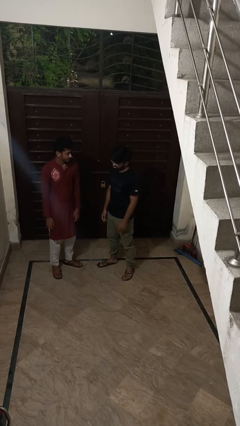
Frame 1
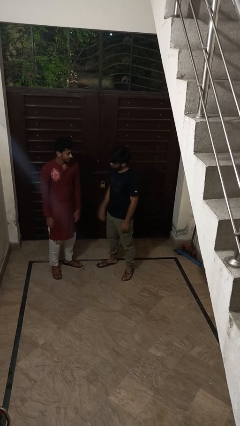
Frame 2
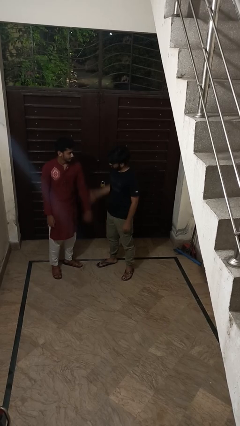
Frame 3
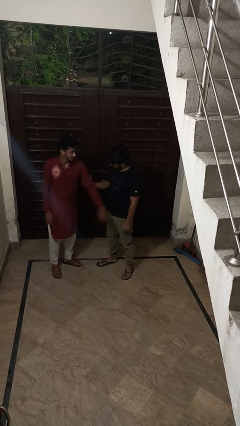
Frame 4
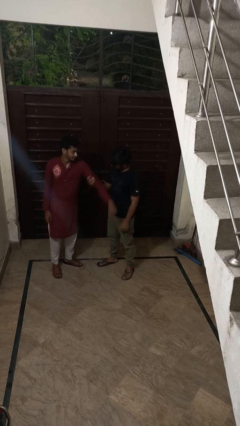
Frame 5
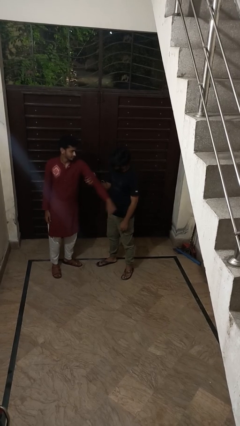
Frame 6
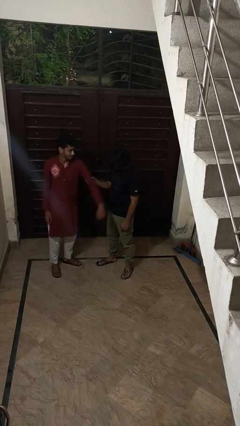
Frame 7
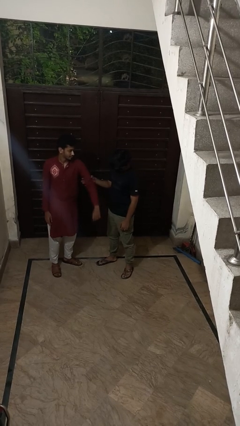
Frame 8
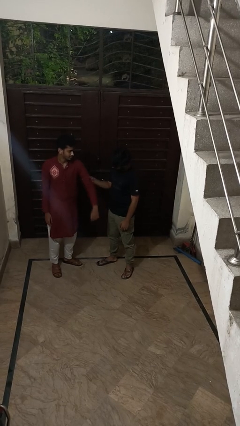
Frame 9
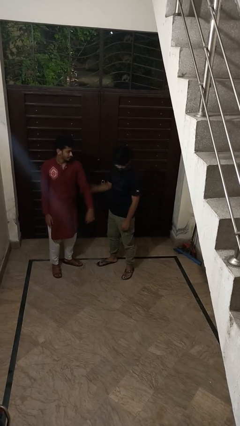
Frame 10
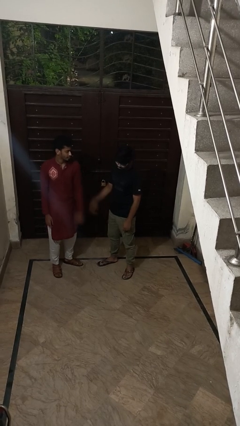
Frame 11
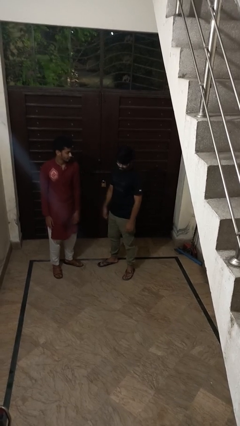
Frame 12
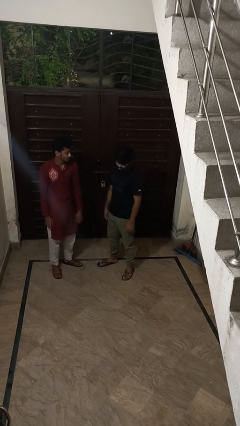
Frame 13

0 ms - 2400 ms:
person grabs person by bicep

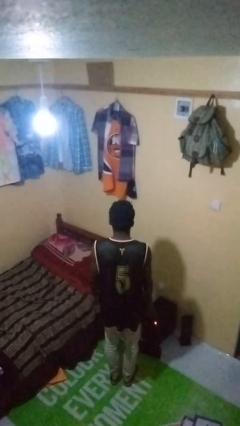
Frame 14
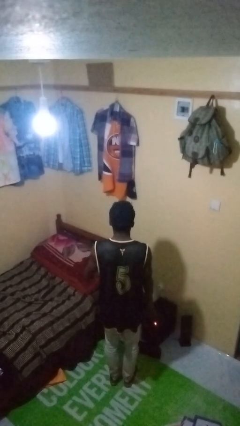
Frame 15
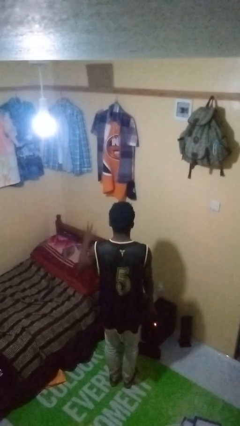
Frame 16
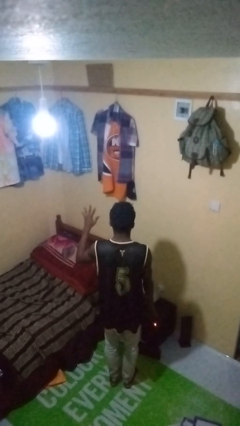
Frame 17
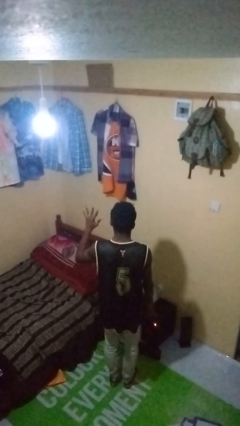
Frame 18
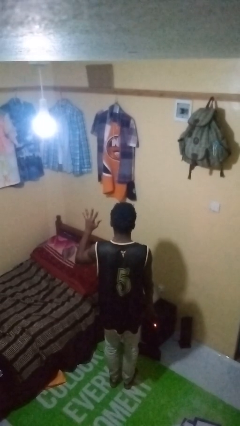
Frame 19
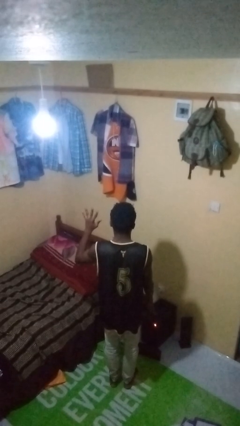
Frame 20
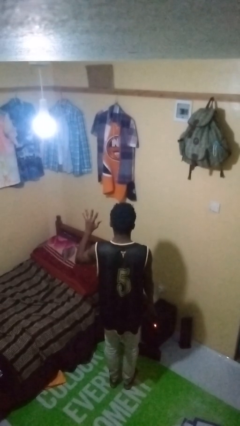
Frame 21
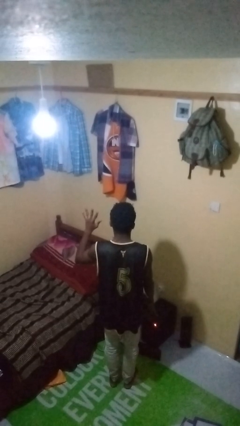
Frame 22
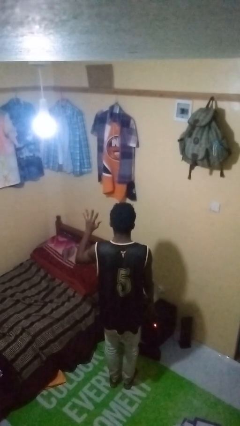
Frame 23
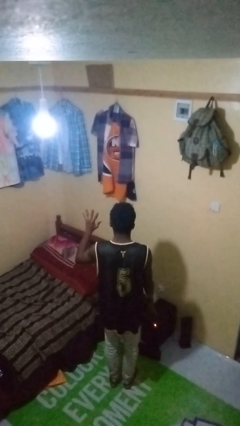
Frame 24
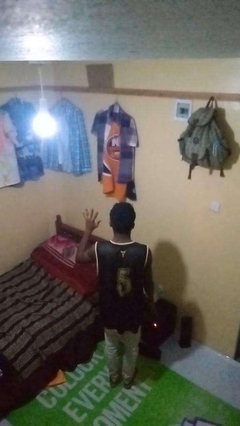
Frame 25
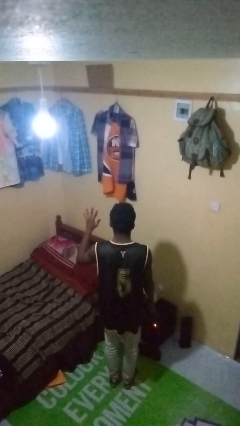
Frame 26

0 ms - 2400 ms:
person gestures number five

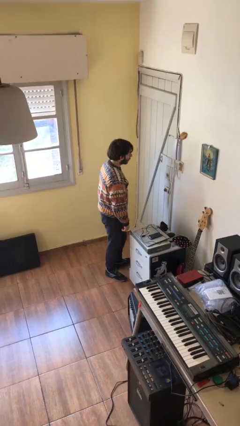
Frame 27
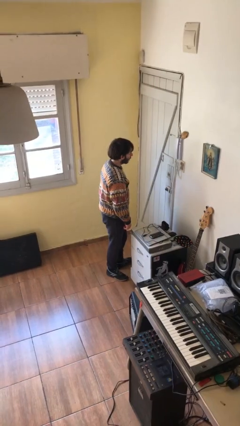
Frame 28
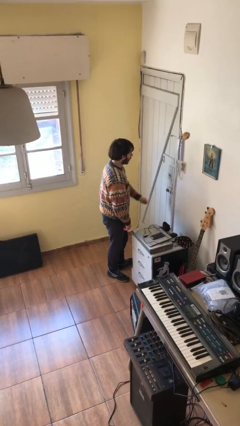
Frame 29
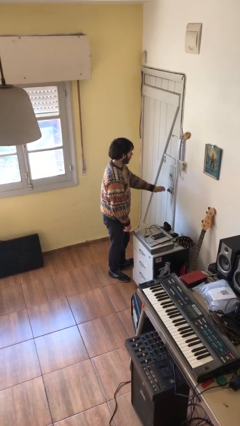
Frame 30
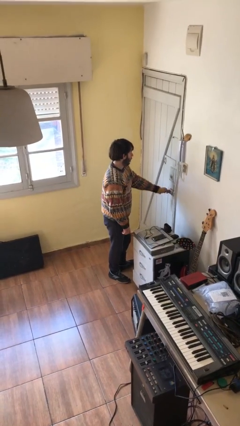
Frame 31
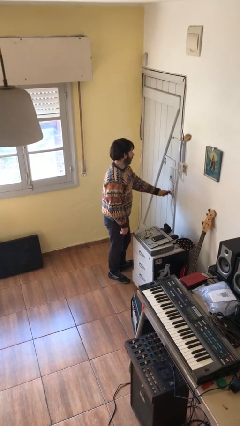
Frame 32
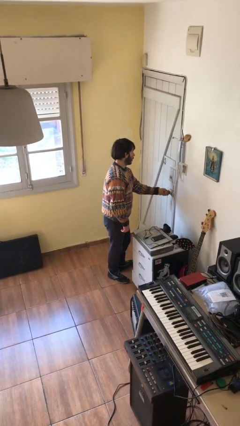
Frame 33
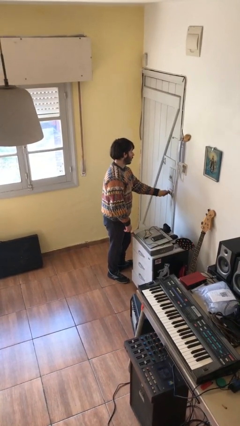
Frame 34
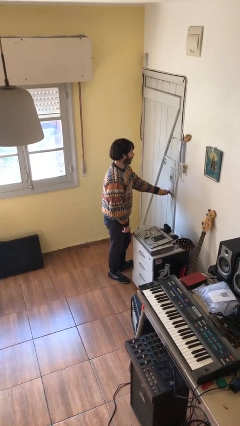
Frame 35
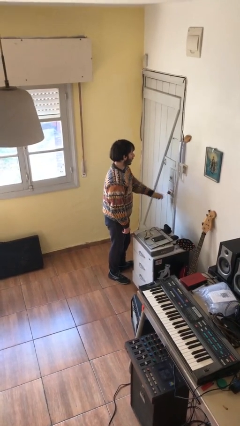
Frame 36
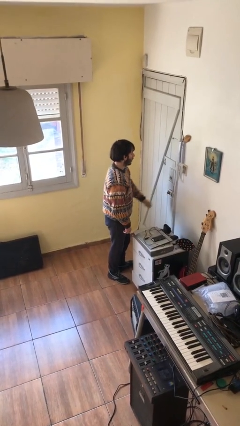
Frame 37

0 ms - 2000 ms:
person unlocks door with keys

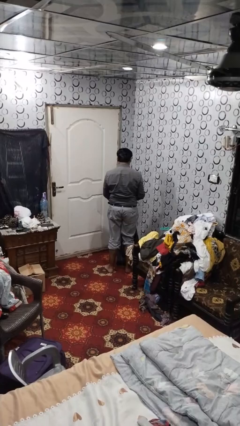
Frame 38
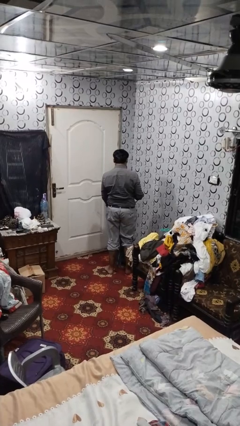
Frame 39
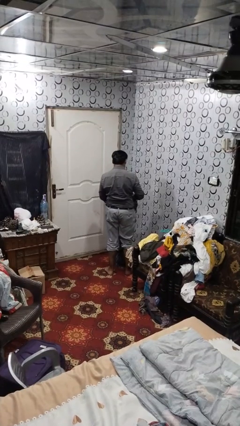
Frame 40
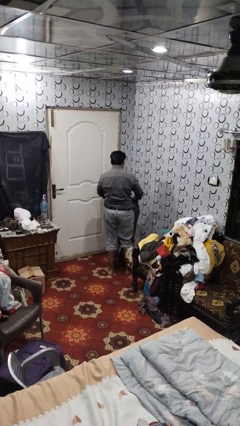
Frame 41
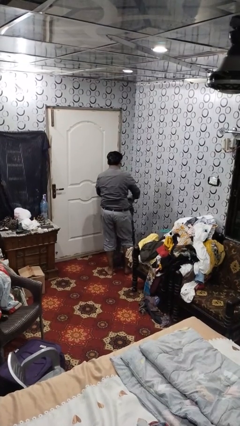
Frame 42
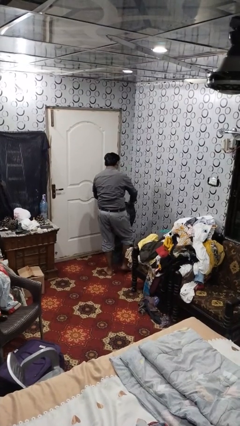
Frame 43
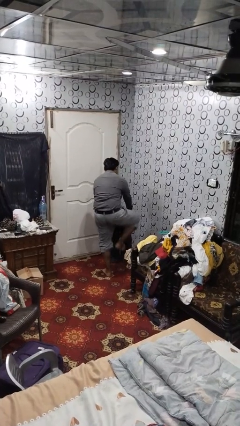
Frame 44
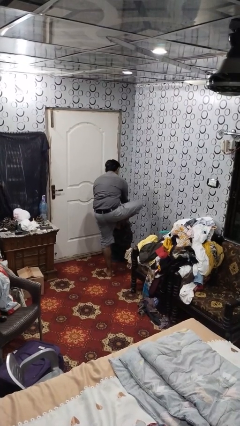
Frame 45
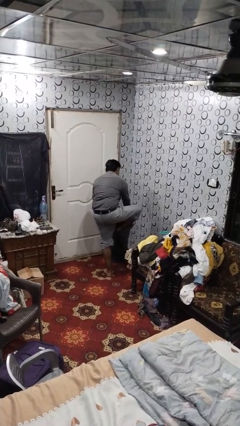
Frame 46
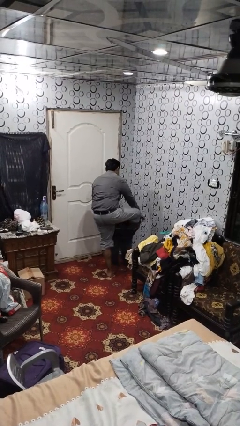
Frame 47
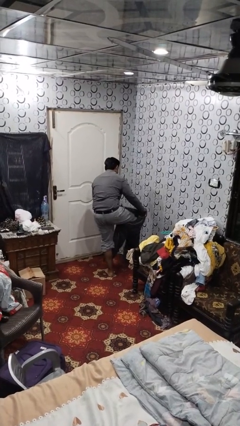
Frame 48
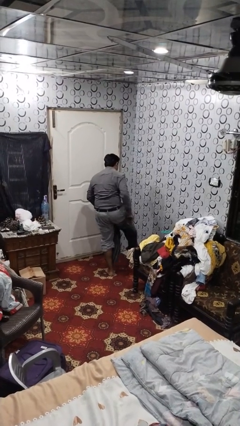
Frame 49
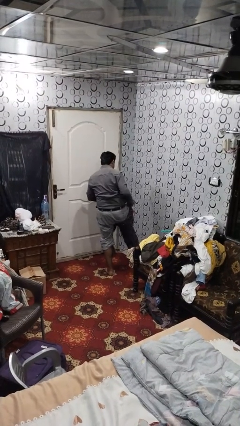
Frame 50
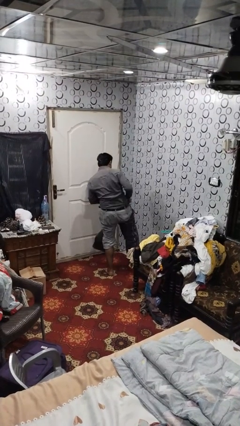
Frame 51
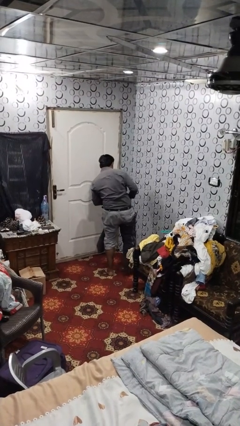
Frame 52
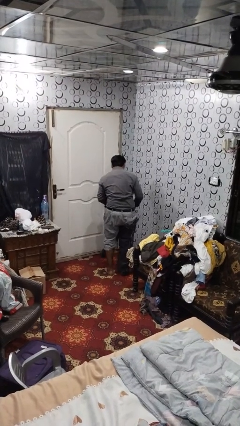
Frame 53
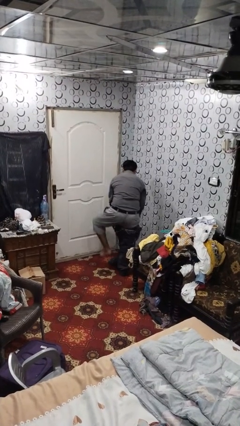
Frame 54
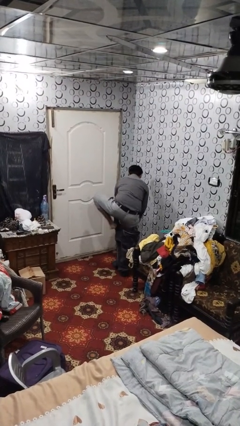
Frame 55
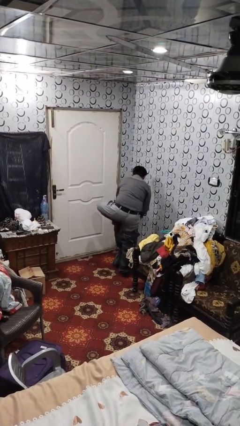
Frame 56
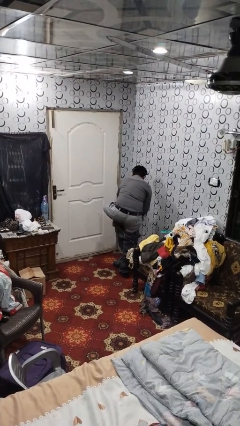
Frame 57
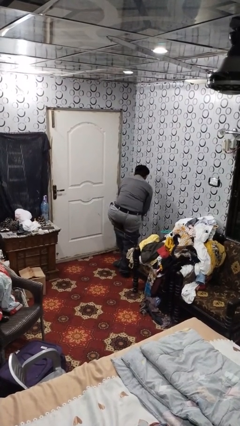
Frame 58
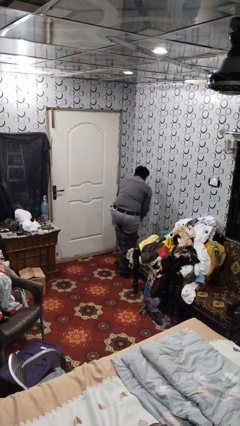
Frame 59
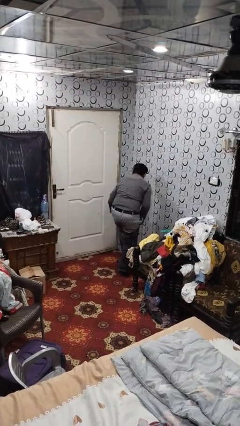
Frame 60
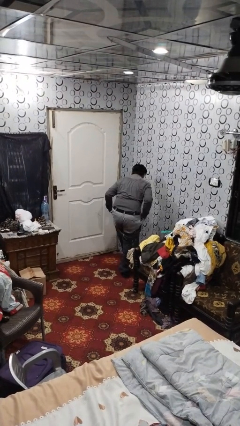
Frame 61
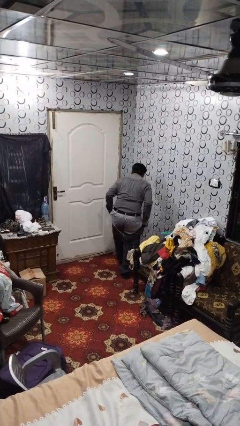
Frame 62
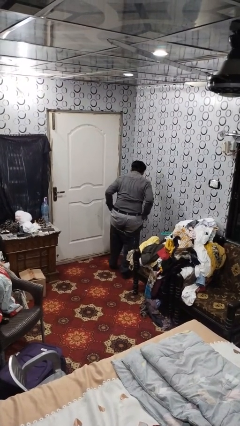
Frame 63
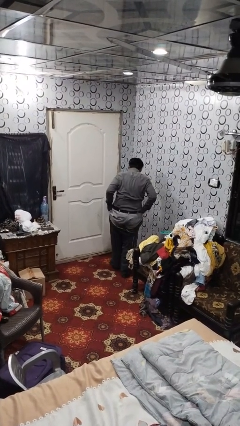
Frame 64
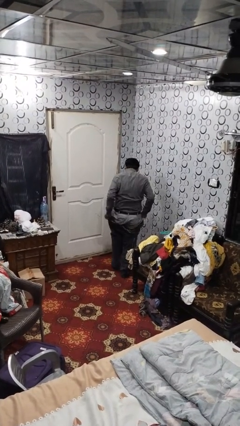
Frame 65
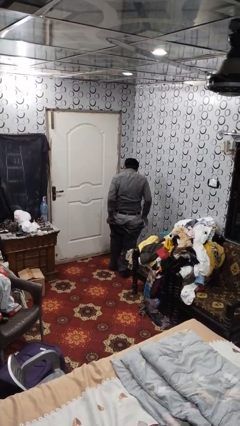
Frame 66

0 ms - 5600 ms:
person puts on pants

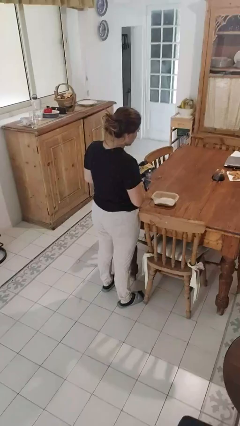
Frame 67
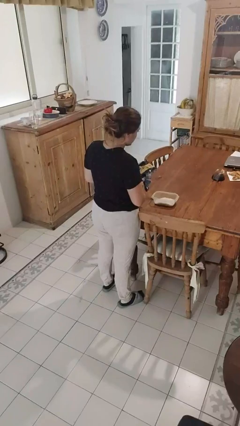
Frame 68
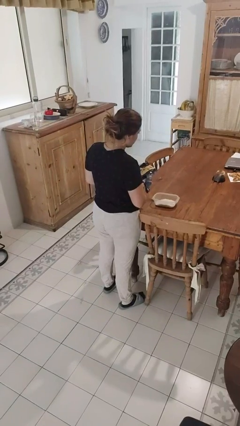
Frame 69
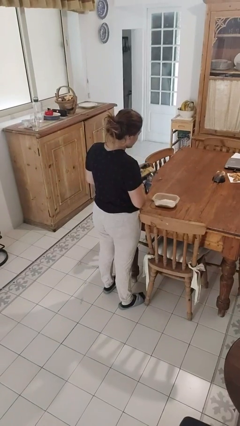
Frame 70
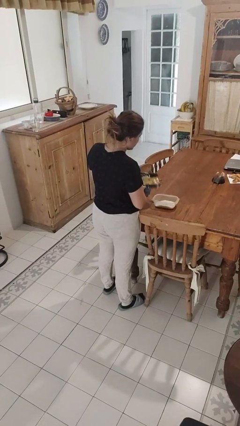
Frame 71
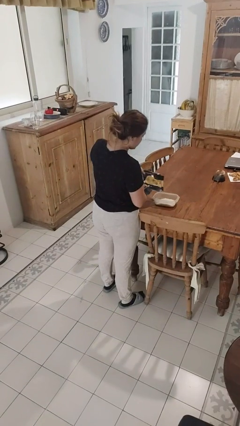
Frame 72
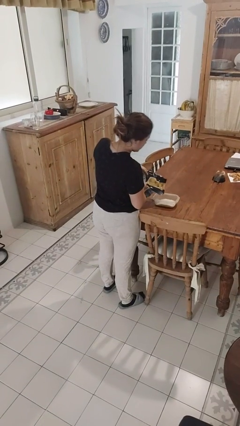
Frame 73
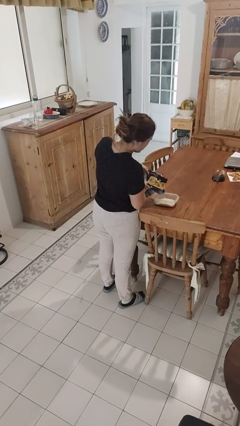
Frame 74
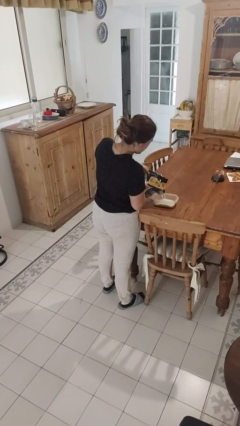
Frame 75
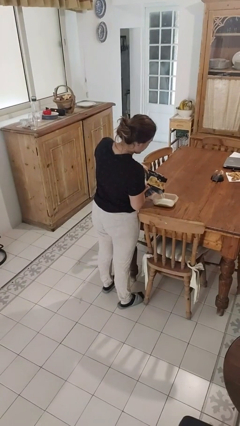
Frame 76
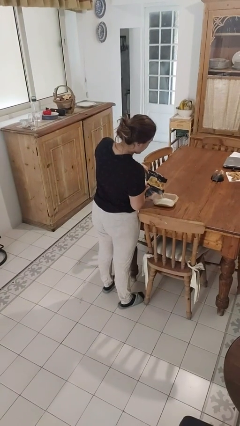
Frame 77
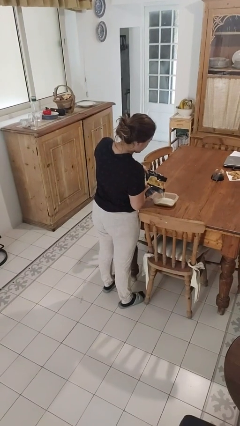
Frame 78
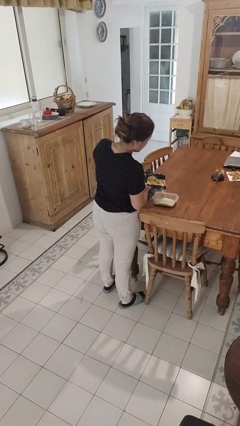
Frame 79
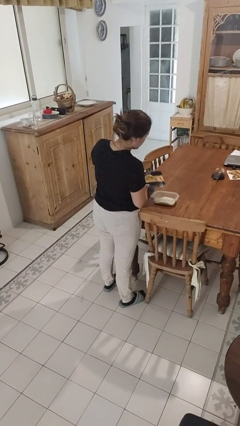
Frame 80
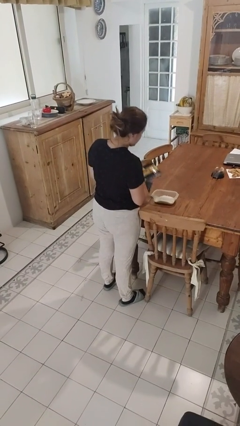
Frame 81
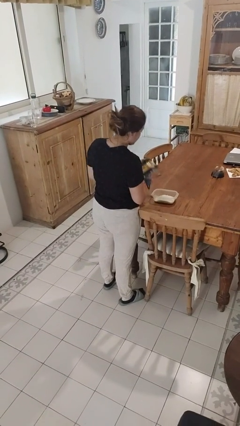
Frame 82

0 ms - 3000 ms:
person pours into bowl

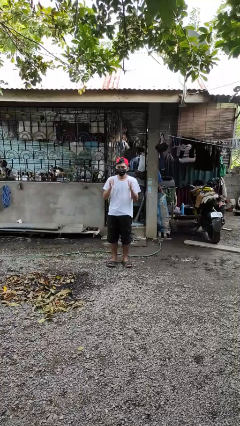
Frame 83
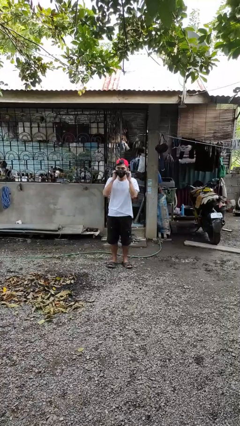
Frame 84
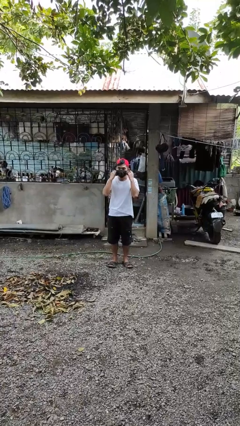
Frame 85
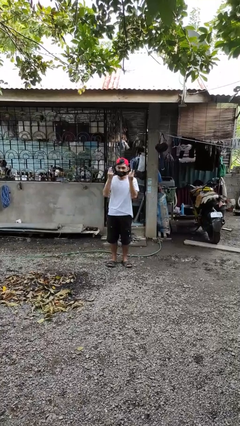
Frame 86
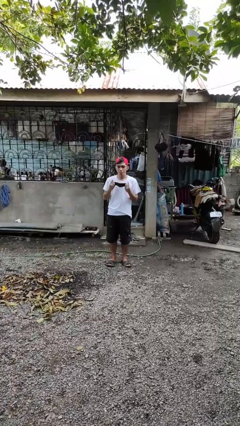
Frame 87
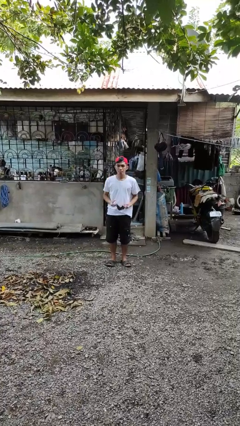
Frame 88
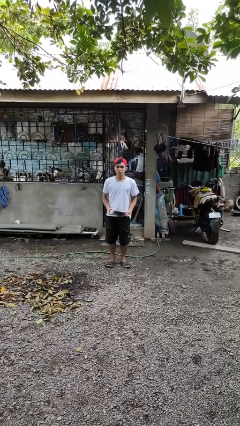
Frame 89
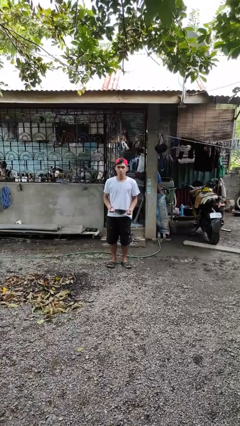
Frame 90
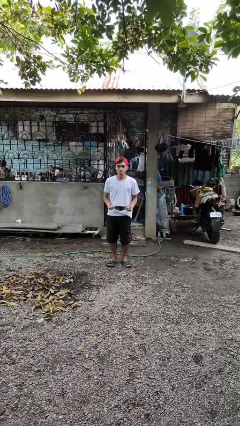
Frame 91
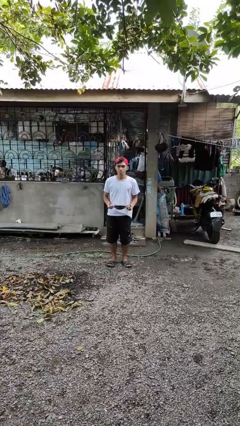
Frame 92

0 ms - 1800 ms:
person takes off facemask
